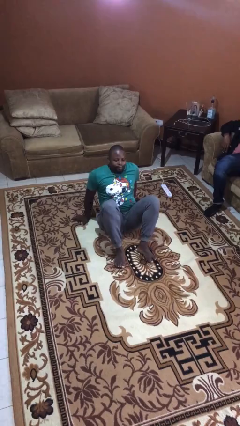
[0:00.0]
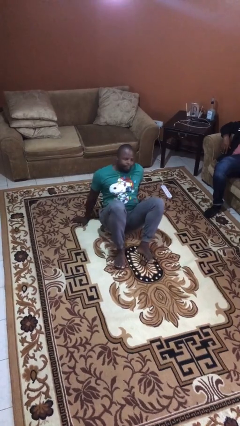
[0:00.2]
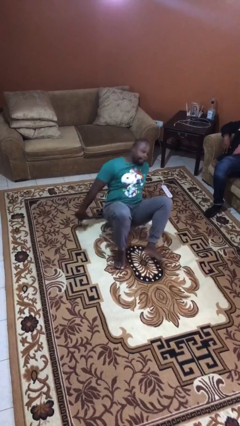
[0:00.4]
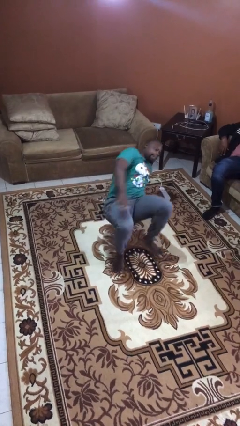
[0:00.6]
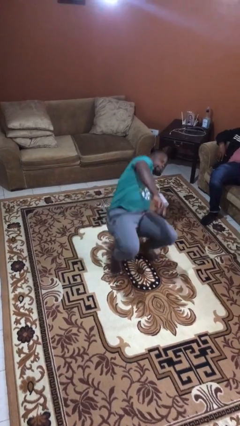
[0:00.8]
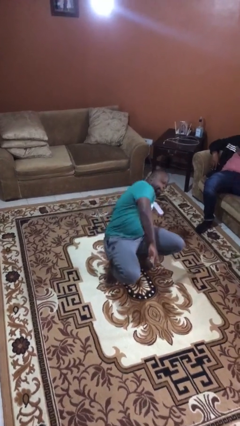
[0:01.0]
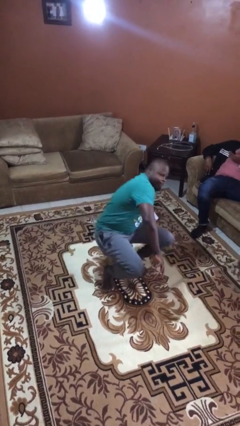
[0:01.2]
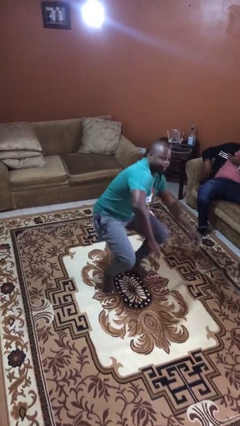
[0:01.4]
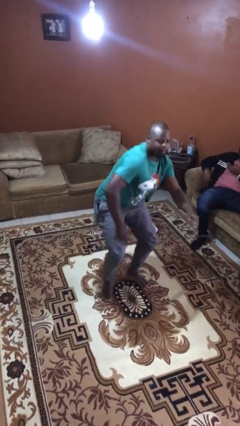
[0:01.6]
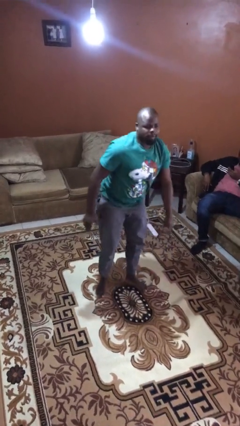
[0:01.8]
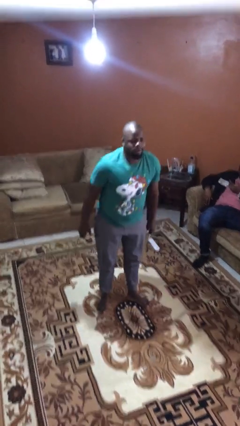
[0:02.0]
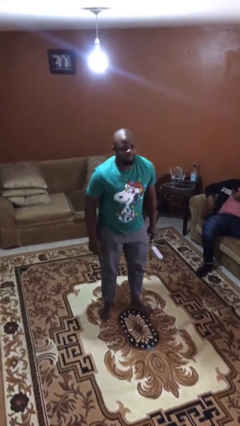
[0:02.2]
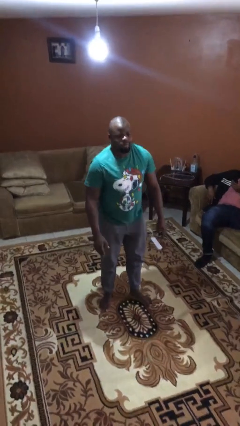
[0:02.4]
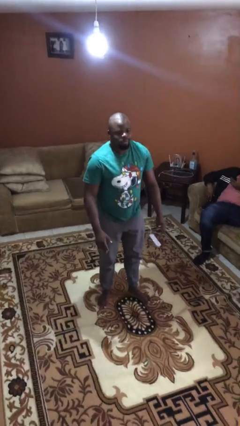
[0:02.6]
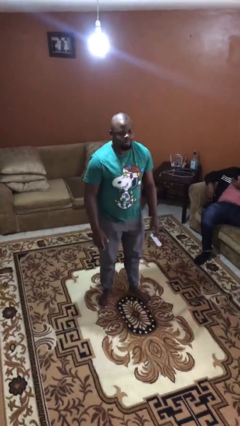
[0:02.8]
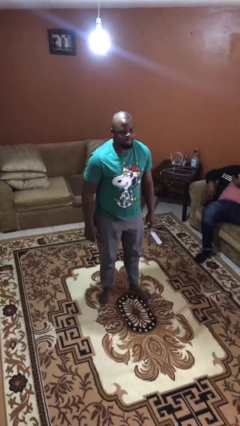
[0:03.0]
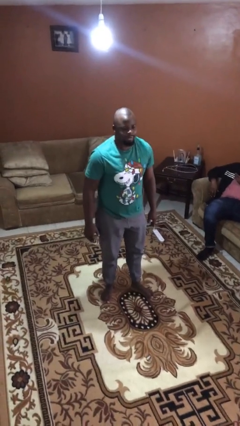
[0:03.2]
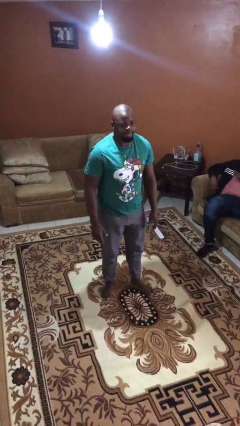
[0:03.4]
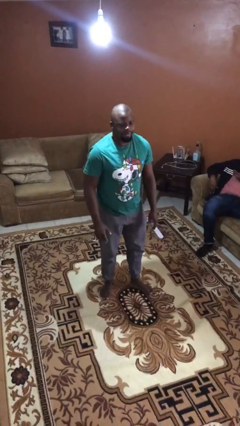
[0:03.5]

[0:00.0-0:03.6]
person stands up

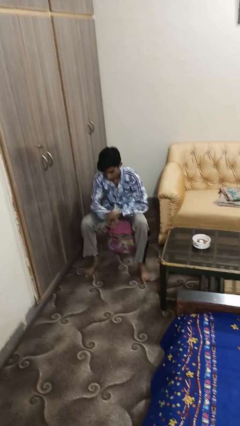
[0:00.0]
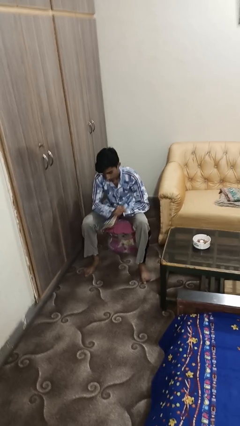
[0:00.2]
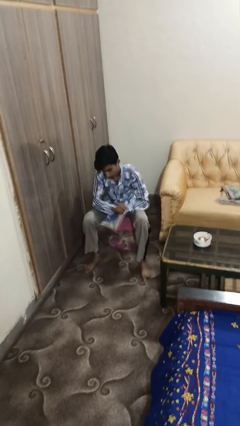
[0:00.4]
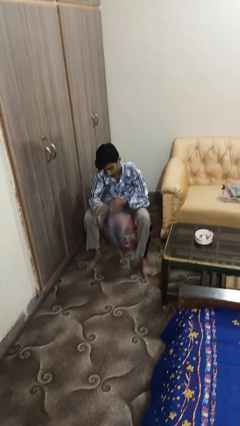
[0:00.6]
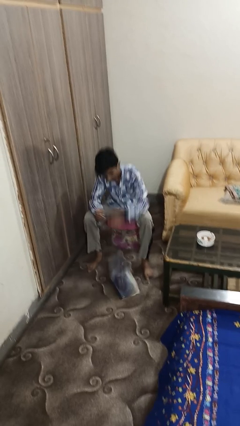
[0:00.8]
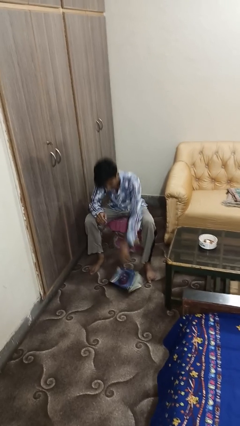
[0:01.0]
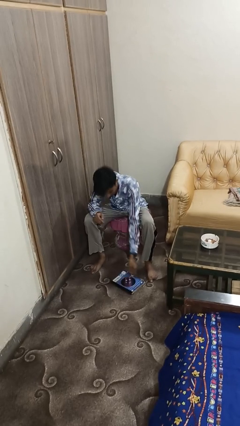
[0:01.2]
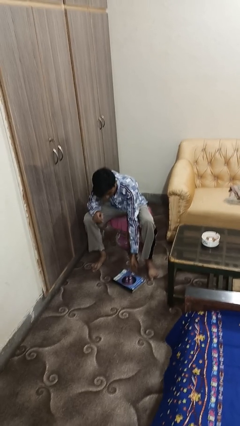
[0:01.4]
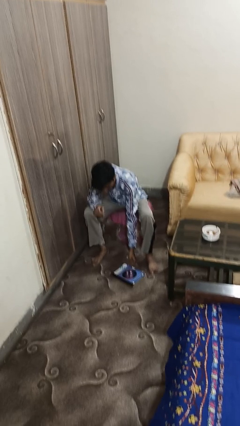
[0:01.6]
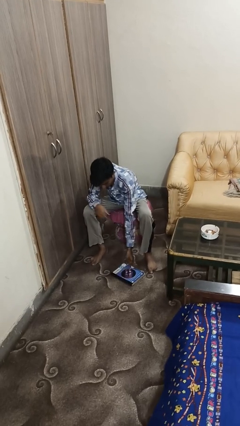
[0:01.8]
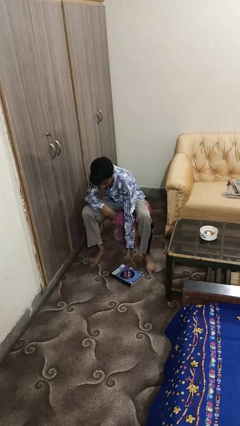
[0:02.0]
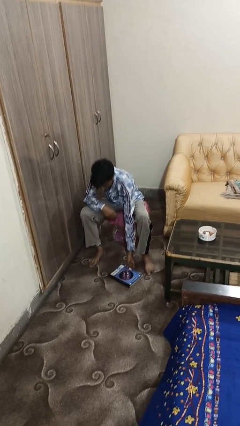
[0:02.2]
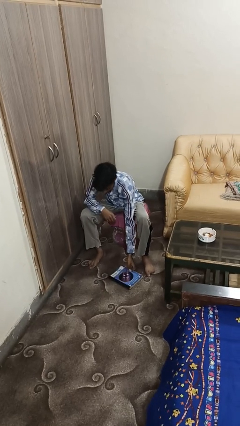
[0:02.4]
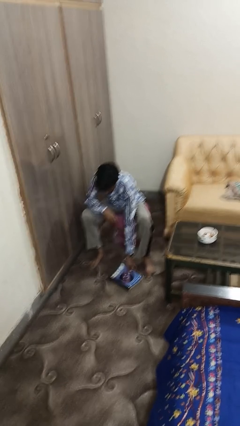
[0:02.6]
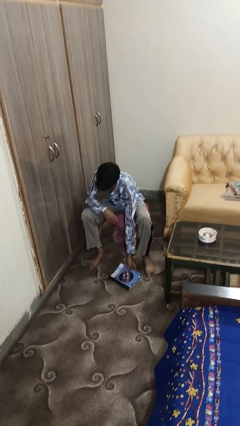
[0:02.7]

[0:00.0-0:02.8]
person drops object

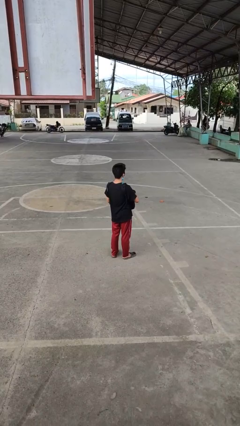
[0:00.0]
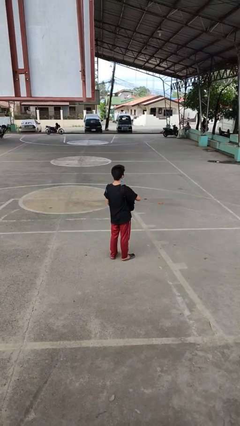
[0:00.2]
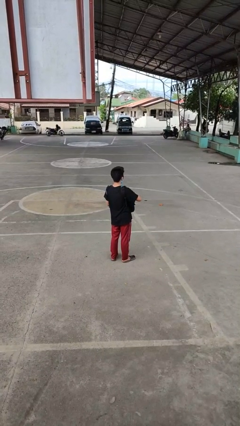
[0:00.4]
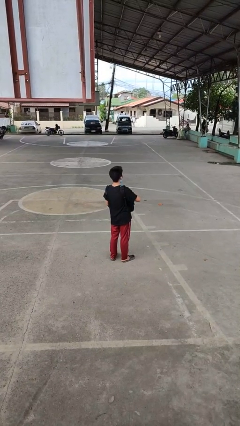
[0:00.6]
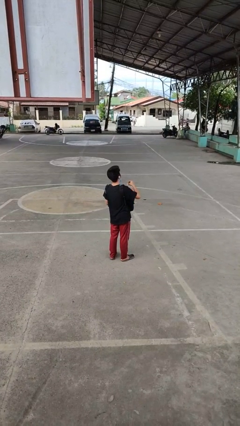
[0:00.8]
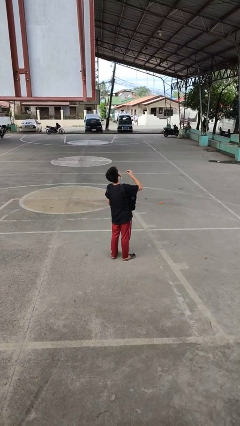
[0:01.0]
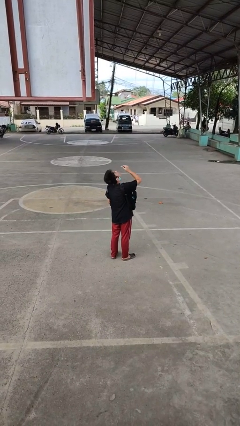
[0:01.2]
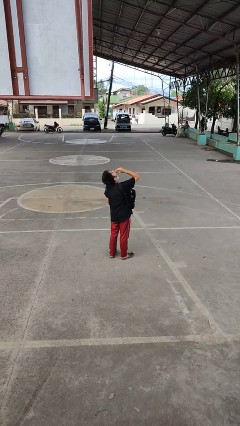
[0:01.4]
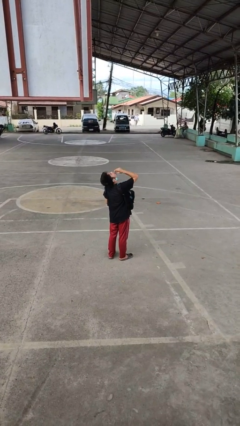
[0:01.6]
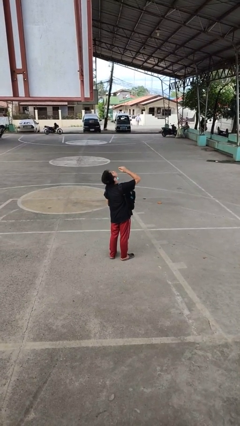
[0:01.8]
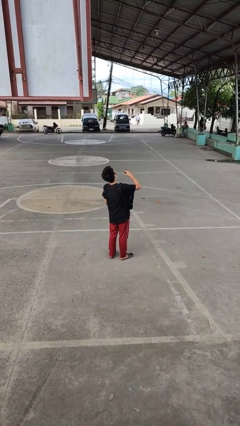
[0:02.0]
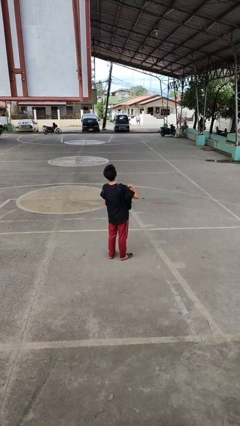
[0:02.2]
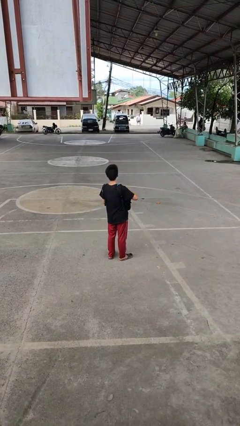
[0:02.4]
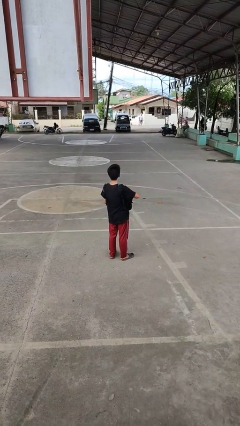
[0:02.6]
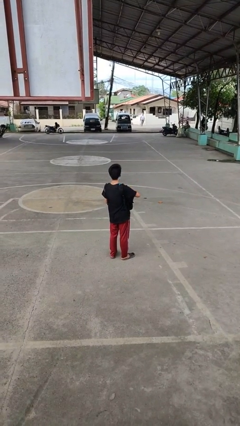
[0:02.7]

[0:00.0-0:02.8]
person eats snack from bag

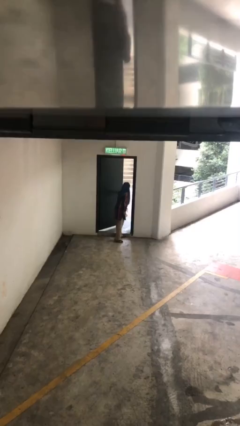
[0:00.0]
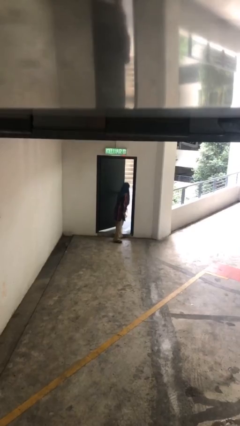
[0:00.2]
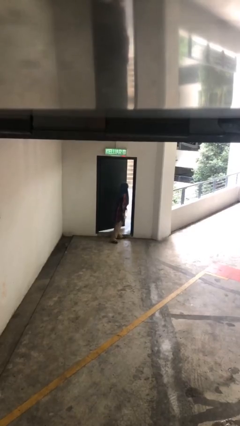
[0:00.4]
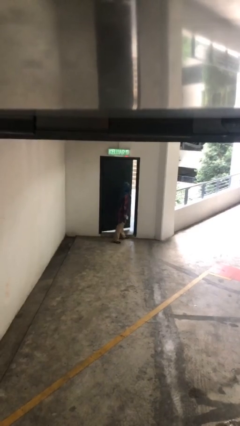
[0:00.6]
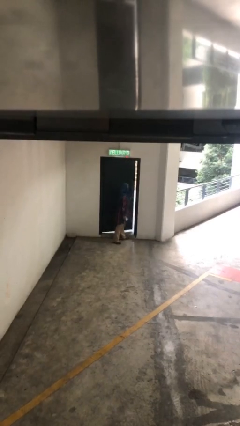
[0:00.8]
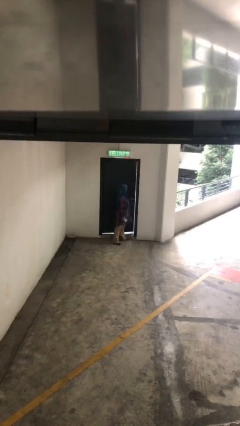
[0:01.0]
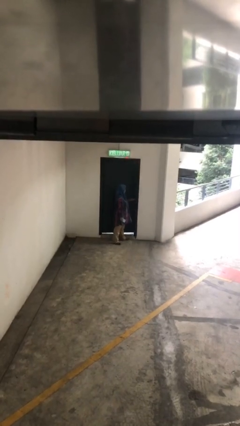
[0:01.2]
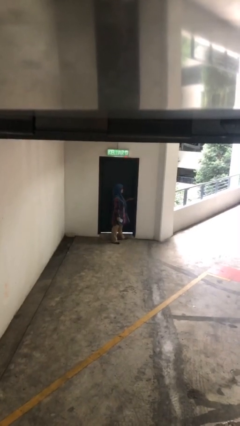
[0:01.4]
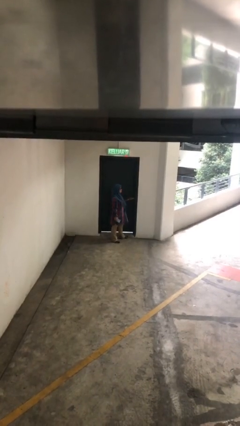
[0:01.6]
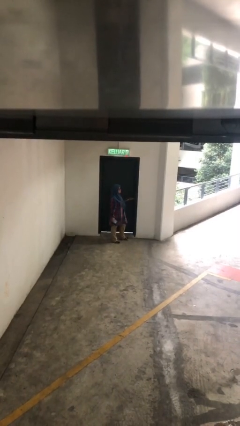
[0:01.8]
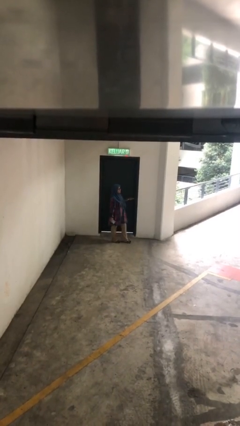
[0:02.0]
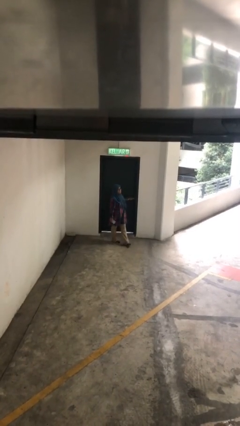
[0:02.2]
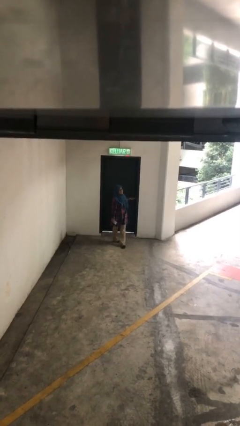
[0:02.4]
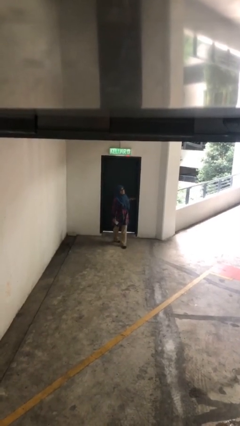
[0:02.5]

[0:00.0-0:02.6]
person closes facility door

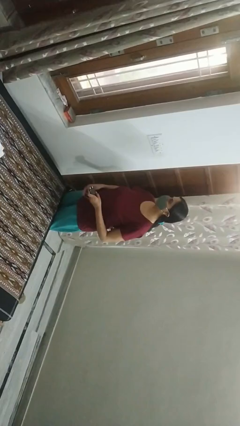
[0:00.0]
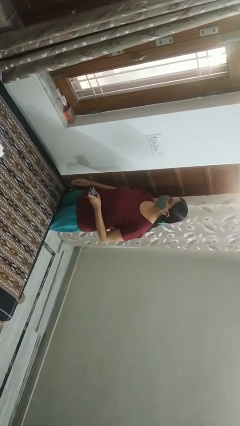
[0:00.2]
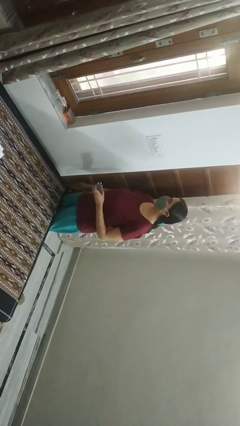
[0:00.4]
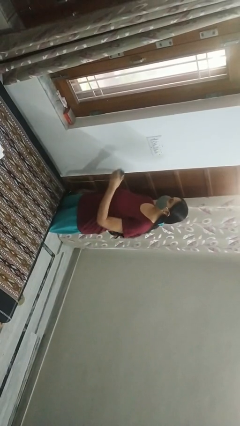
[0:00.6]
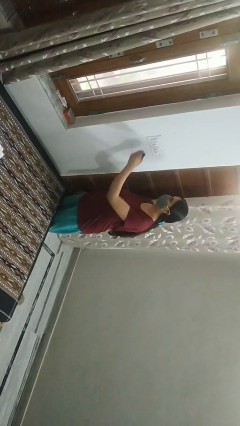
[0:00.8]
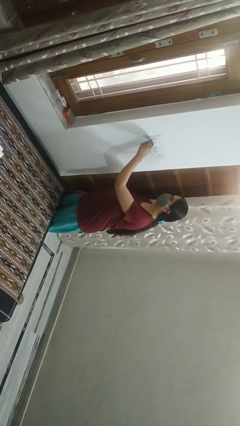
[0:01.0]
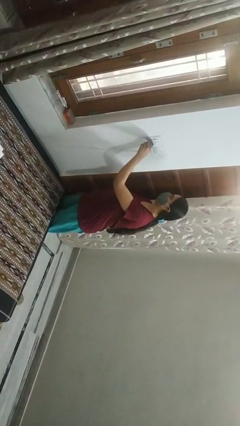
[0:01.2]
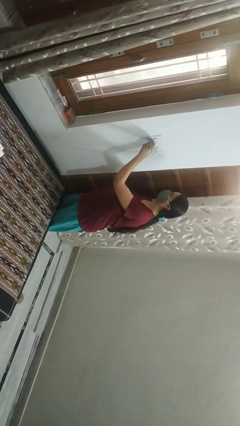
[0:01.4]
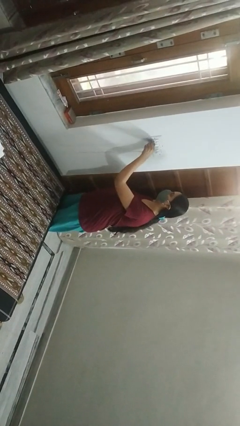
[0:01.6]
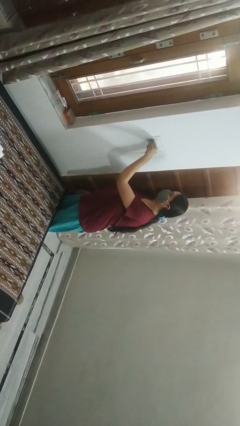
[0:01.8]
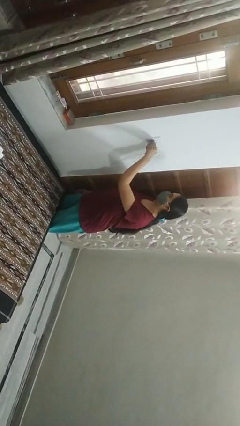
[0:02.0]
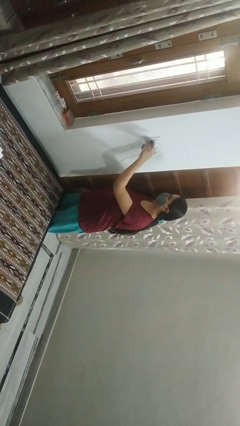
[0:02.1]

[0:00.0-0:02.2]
person plugs into electrical socket

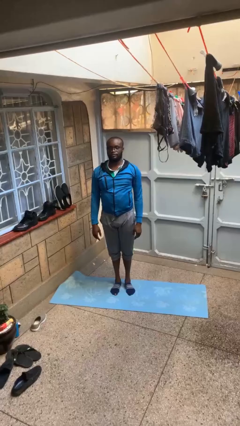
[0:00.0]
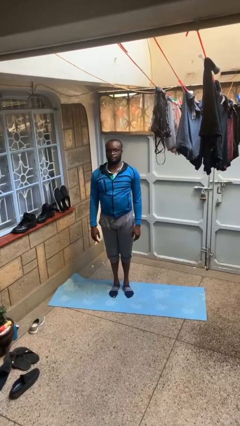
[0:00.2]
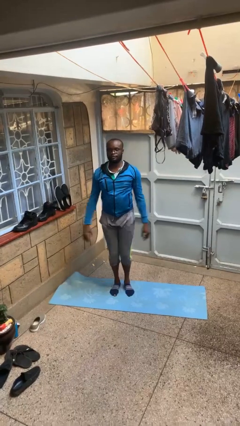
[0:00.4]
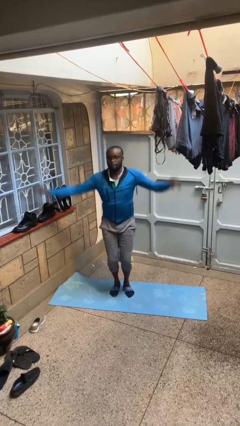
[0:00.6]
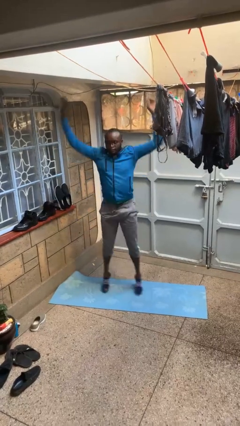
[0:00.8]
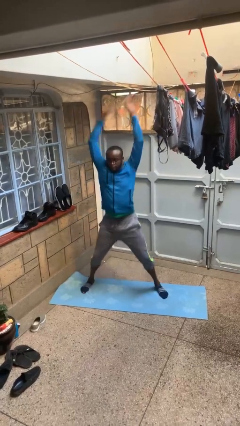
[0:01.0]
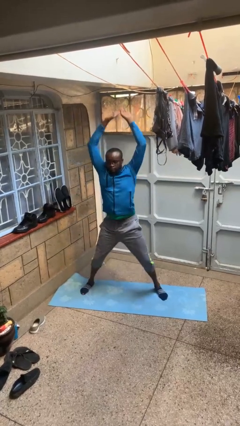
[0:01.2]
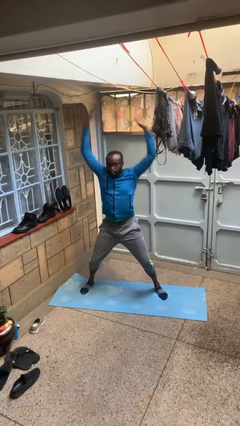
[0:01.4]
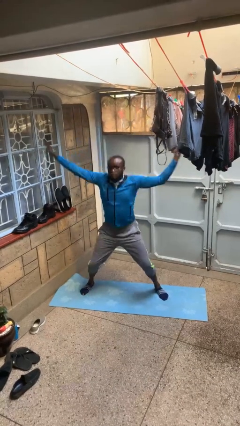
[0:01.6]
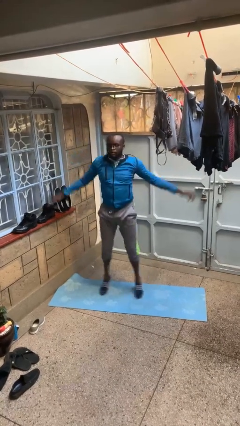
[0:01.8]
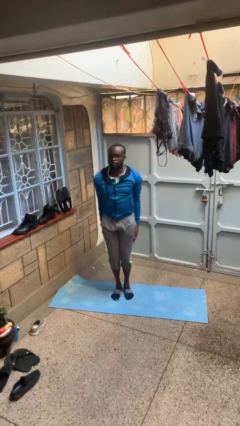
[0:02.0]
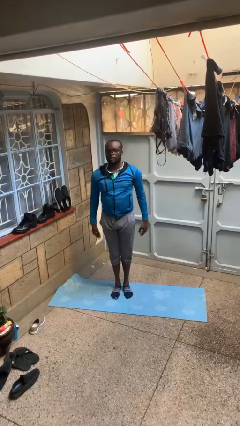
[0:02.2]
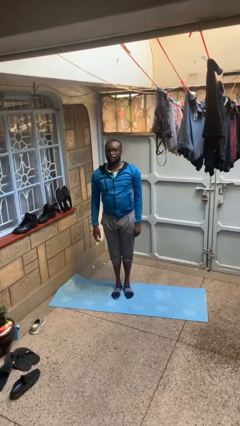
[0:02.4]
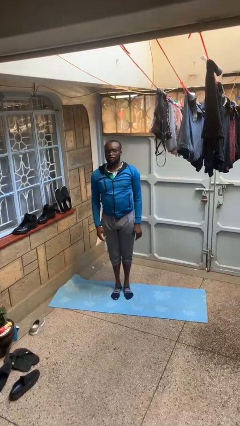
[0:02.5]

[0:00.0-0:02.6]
person exercises with jumping jacks

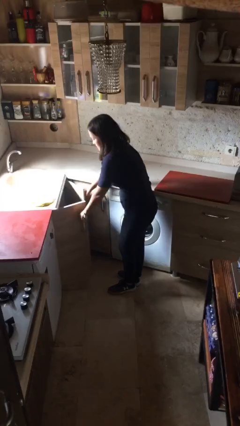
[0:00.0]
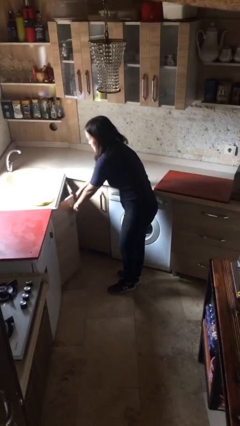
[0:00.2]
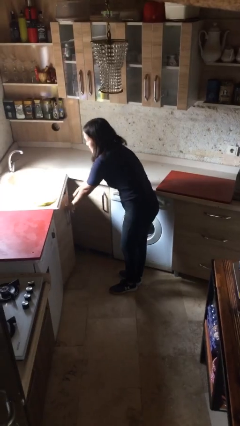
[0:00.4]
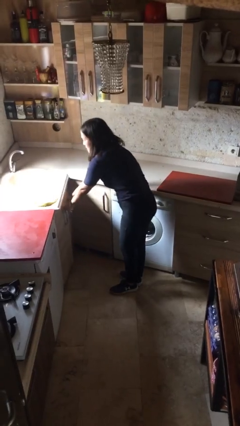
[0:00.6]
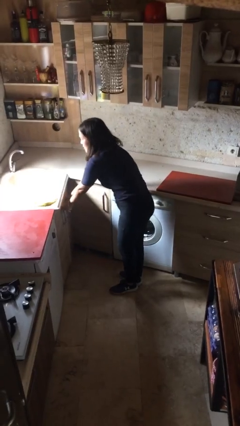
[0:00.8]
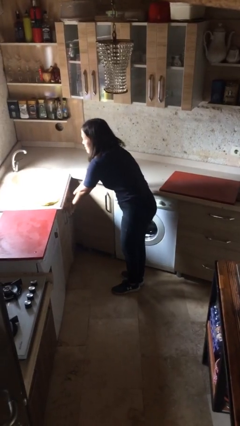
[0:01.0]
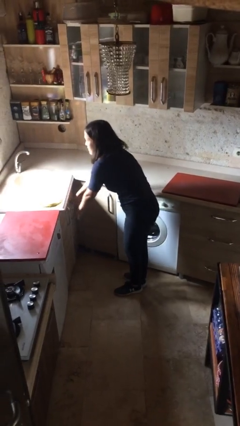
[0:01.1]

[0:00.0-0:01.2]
person closes cabinet
